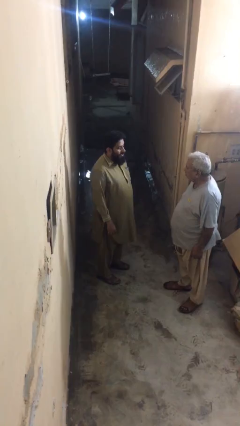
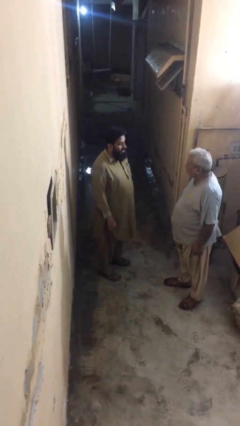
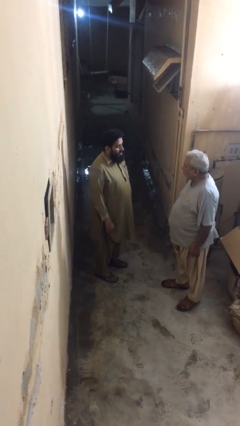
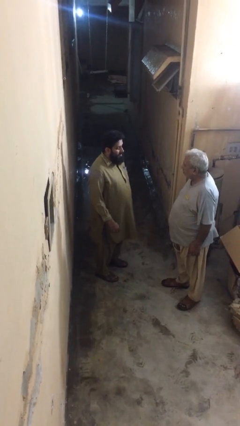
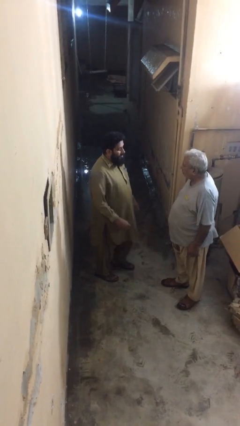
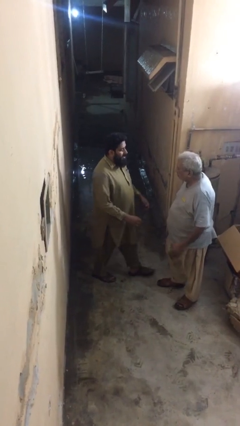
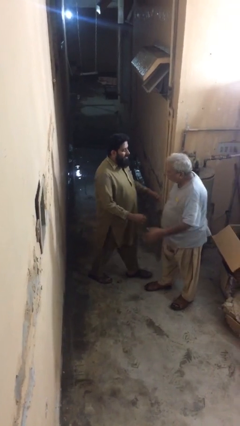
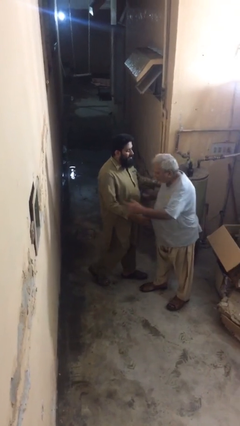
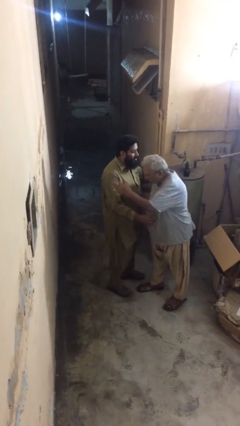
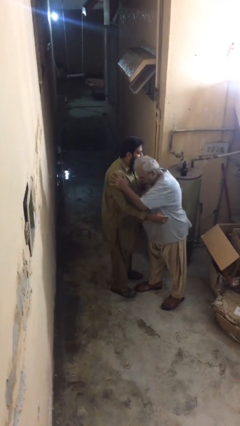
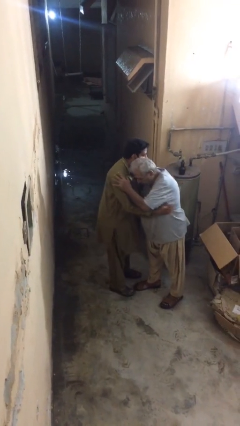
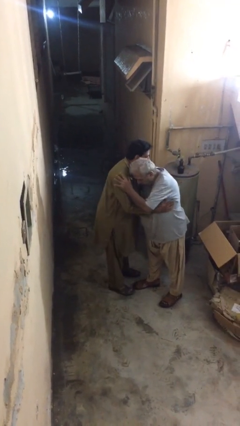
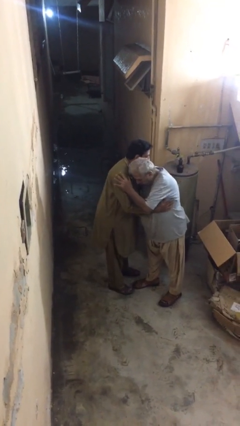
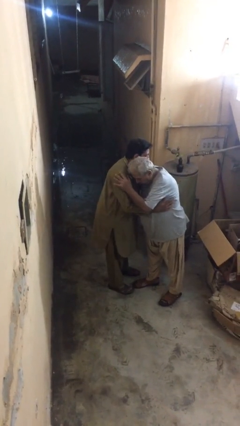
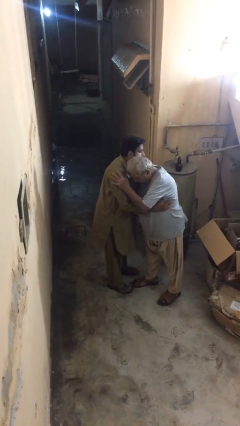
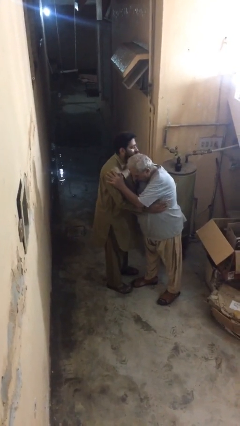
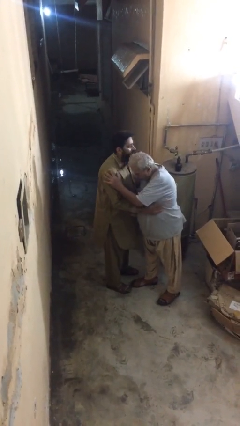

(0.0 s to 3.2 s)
person embraces person

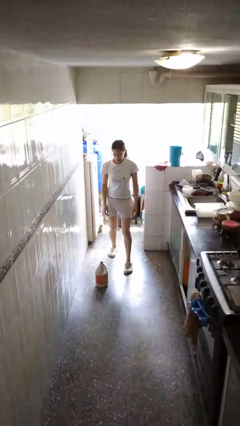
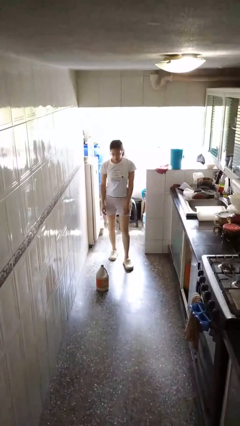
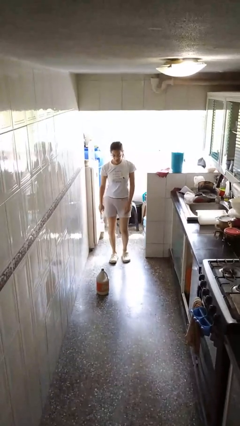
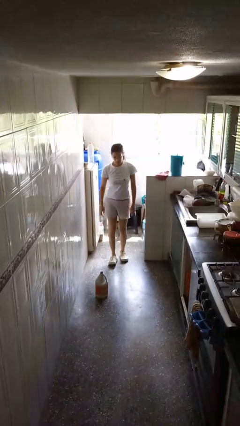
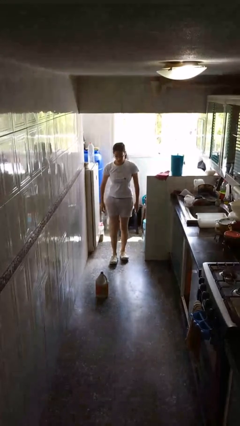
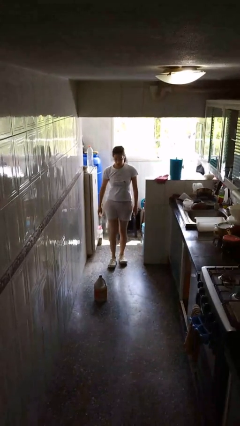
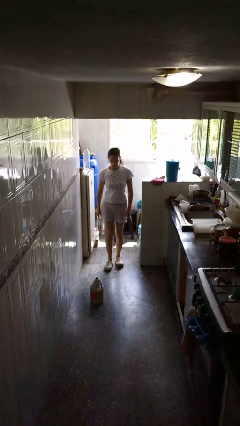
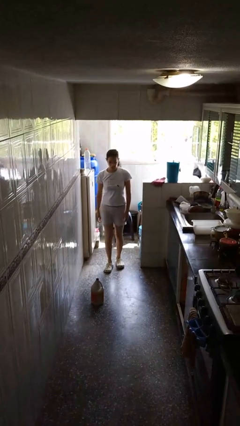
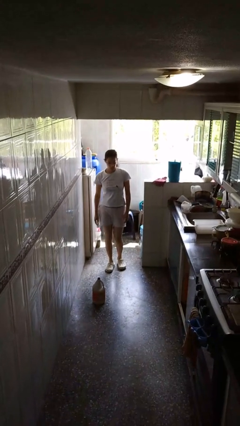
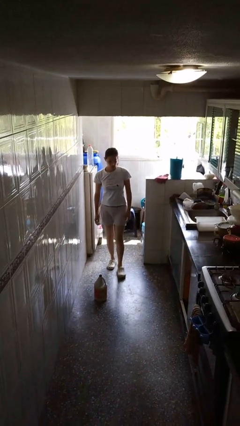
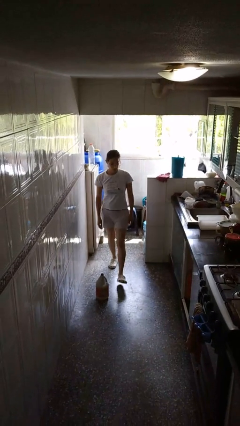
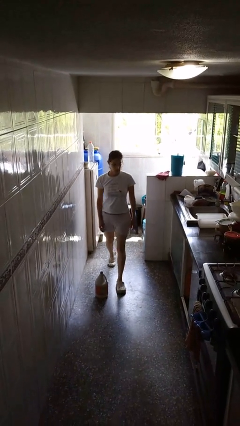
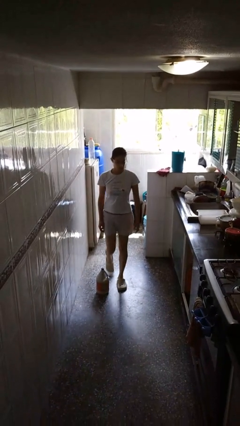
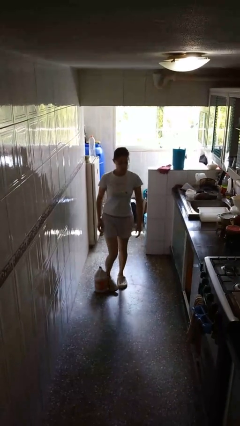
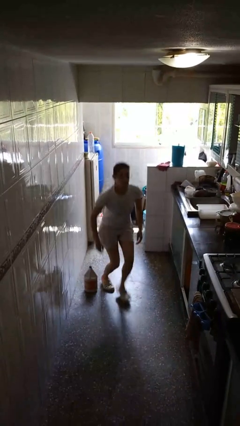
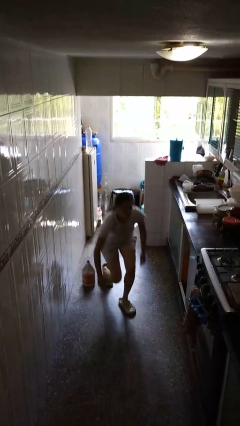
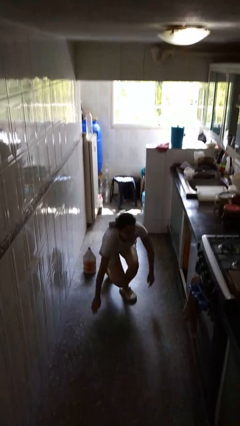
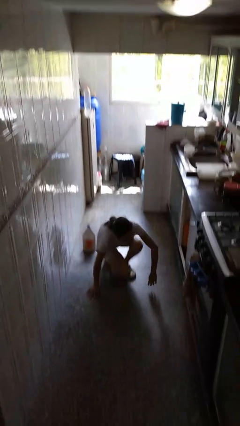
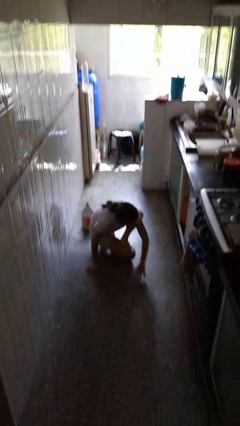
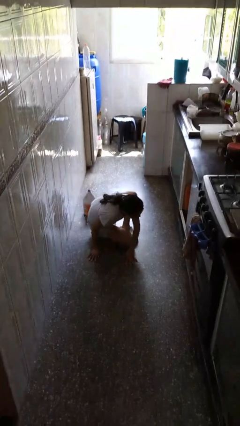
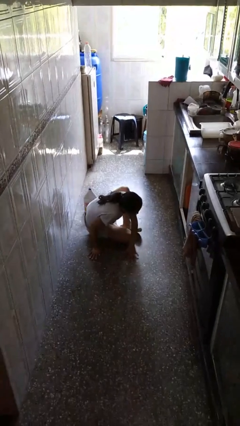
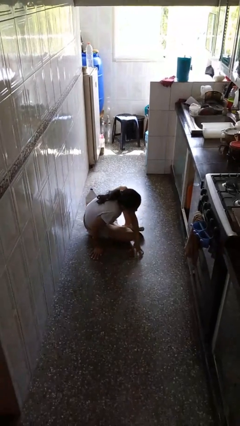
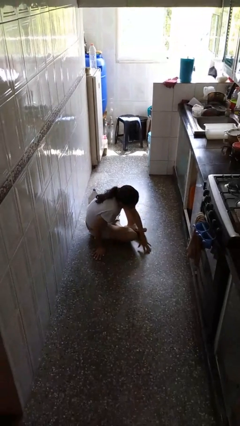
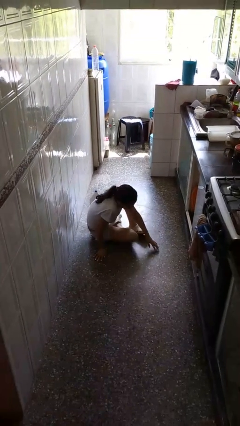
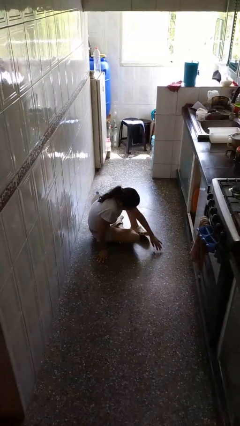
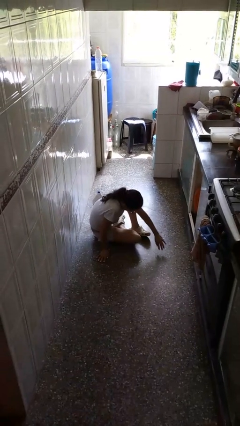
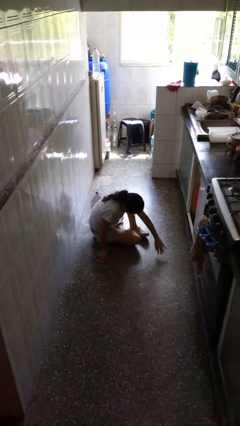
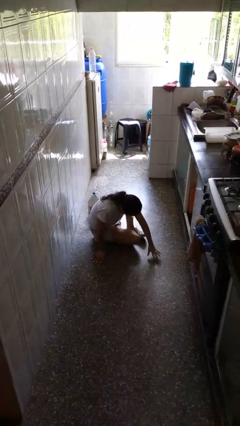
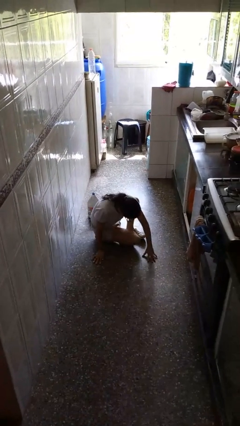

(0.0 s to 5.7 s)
person trips on object on floor

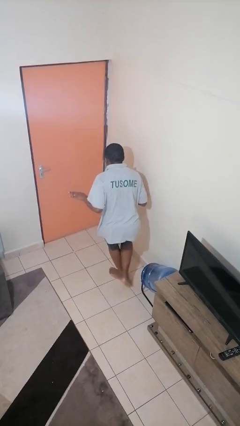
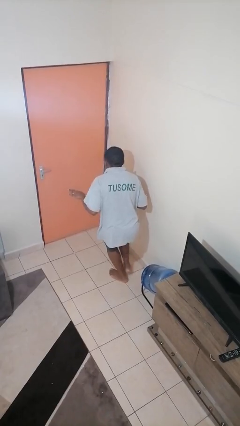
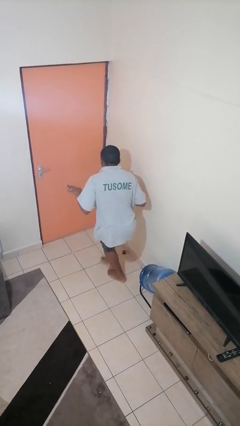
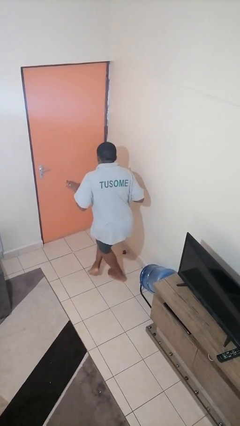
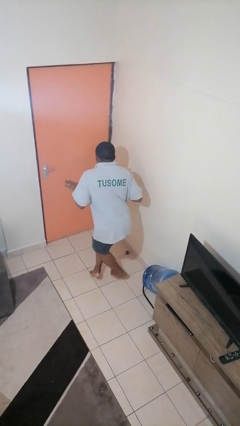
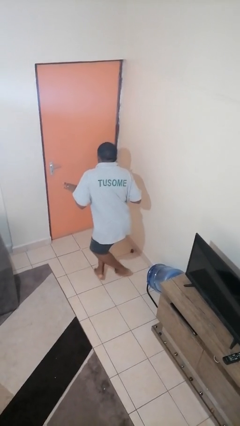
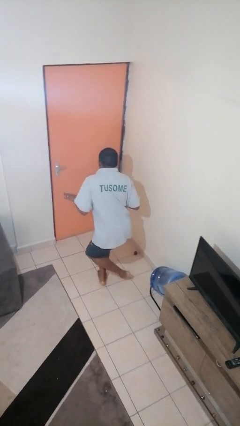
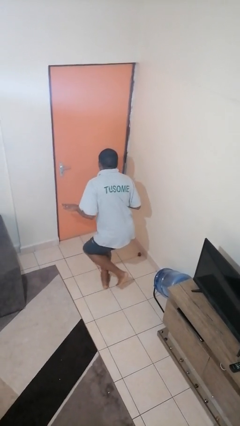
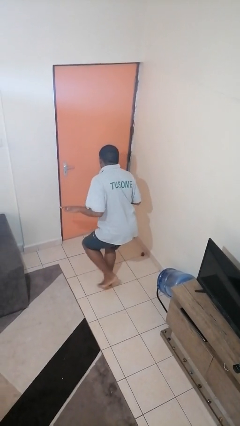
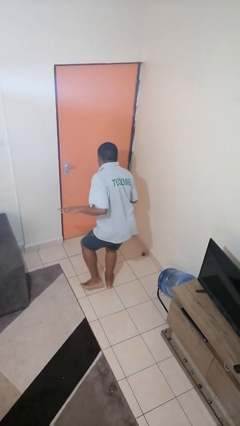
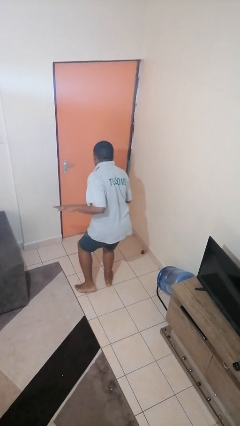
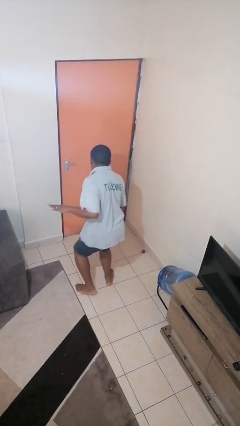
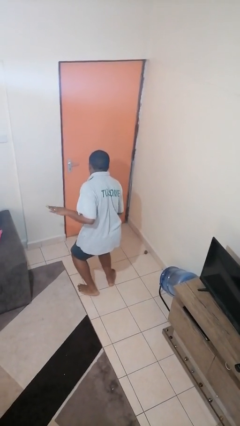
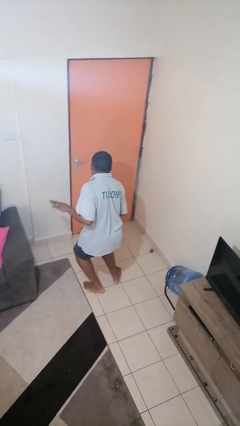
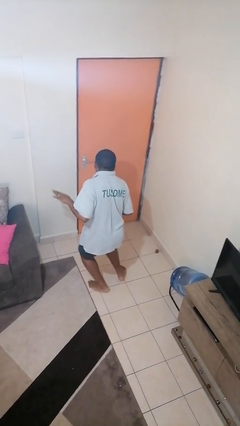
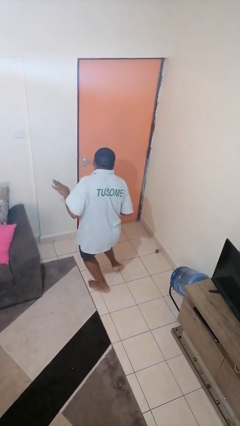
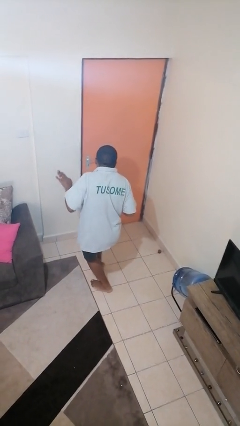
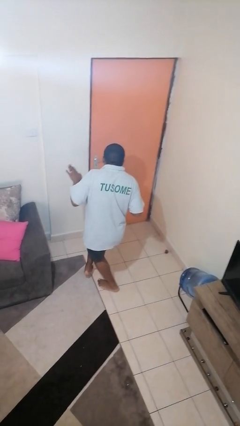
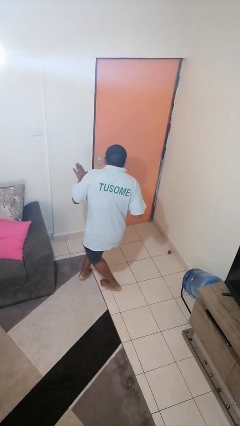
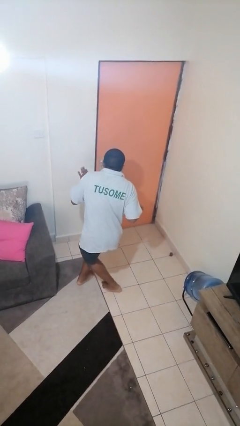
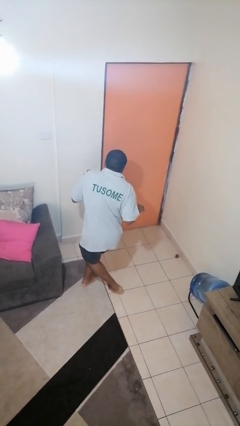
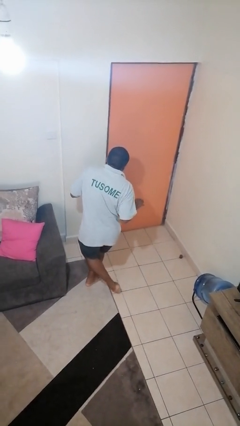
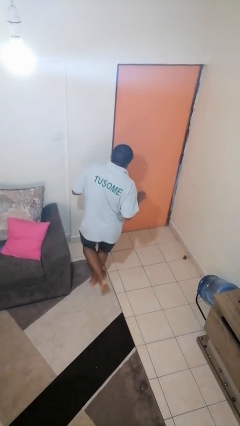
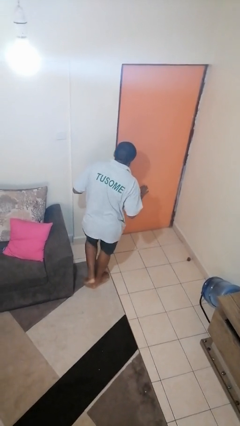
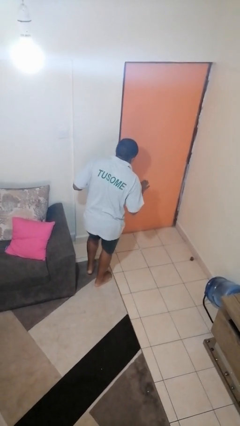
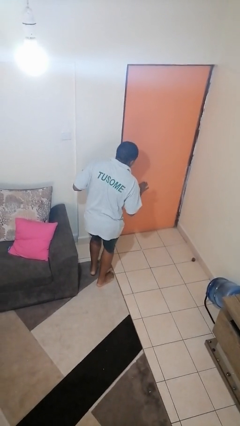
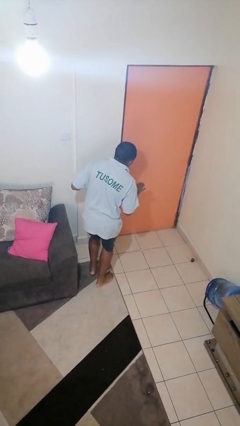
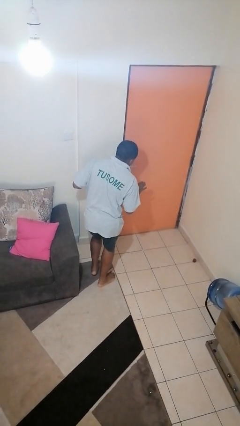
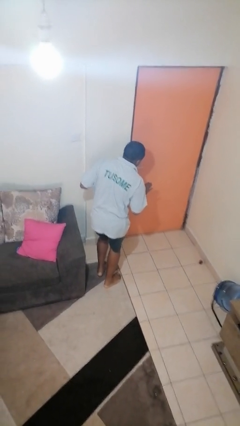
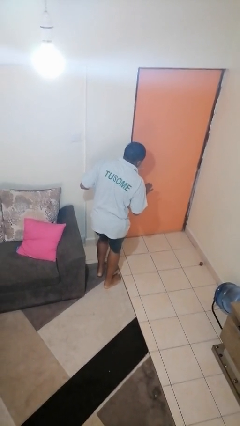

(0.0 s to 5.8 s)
person walks tiptoe

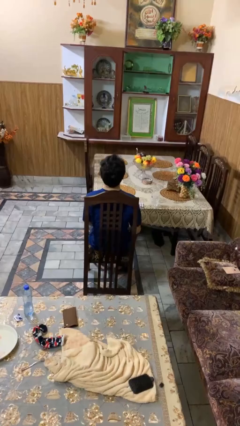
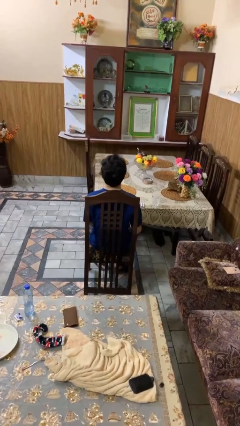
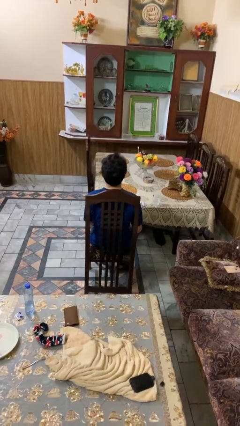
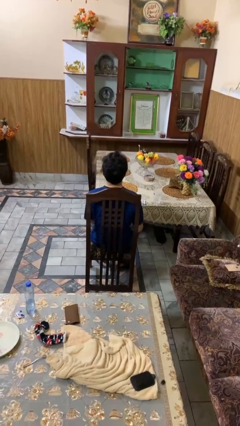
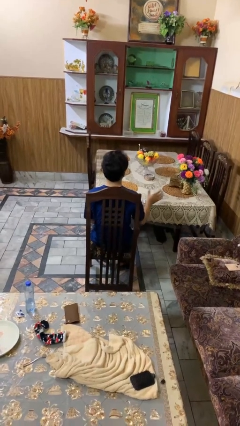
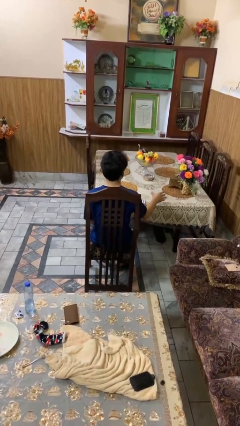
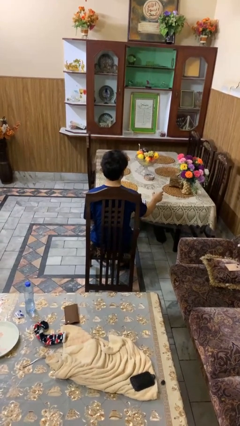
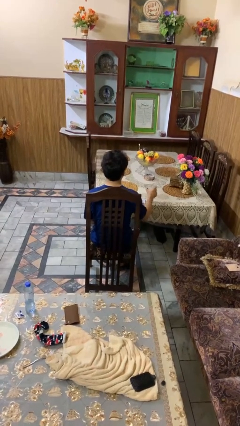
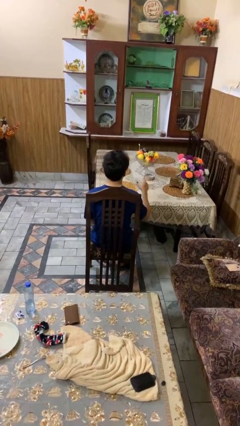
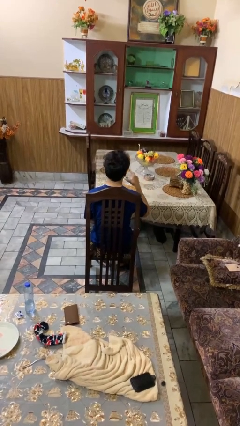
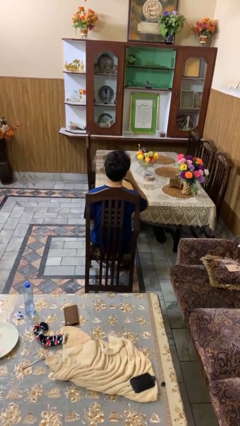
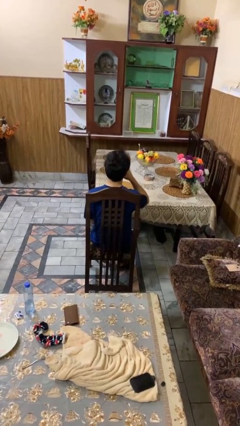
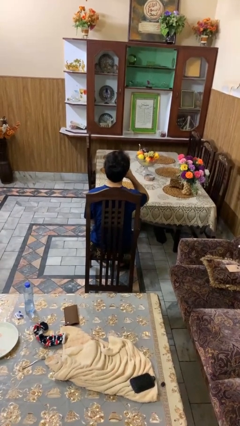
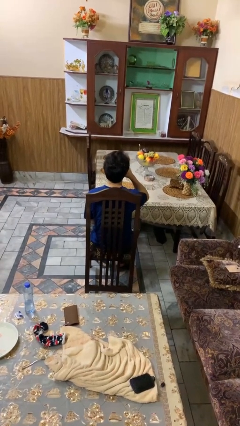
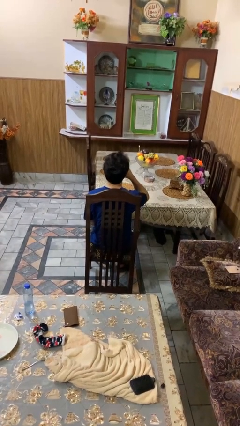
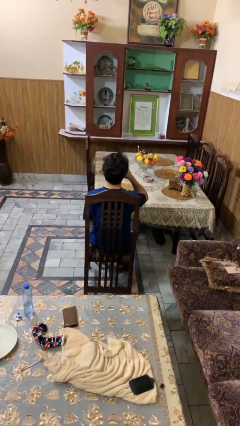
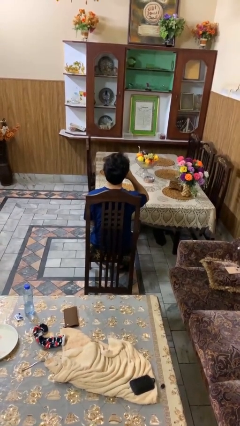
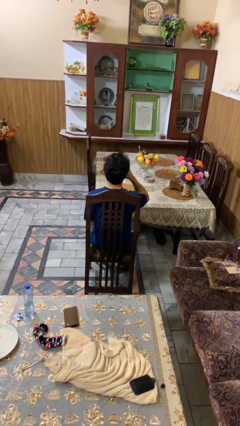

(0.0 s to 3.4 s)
person drinks from cup
